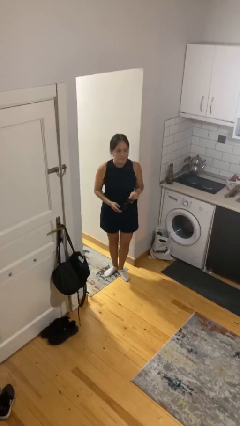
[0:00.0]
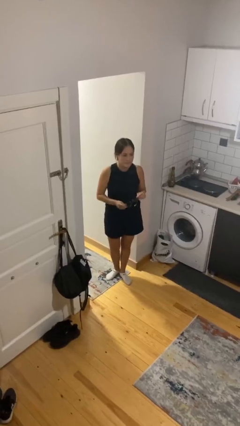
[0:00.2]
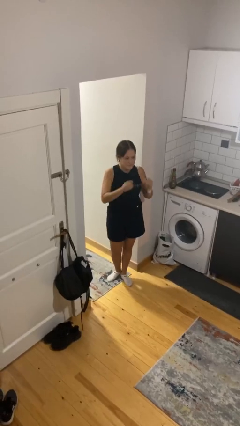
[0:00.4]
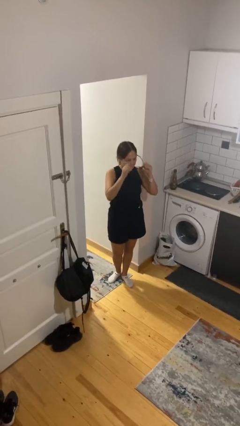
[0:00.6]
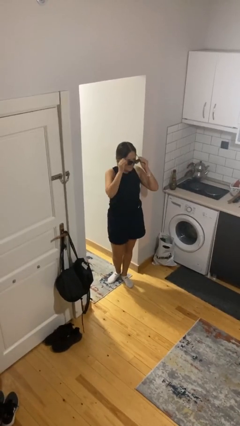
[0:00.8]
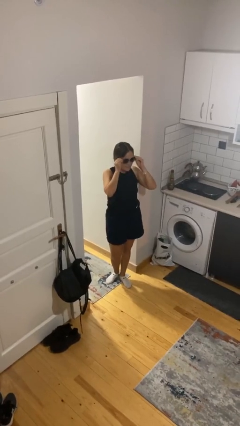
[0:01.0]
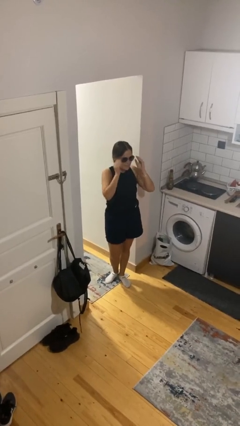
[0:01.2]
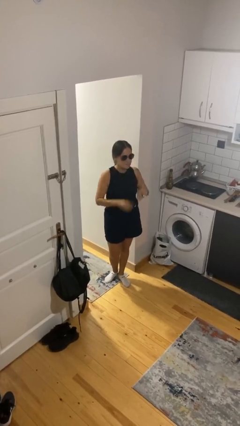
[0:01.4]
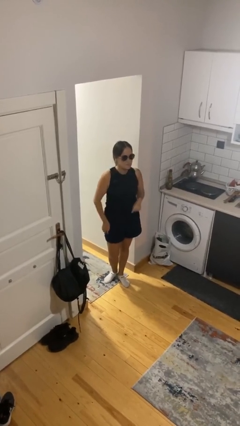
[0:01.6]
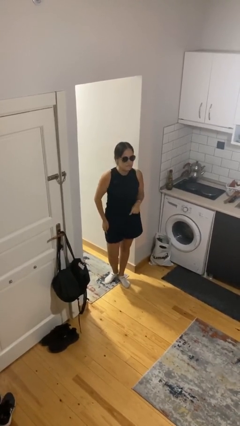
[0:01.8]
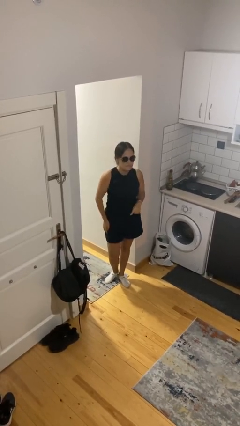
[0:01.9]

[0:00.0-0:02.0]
person puts on sunglasses

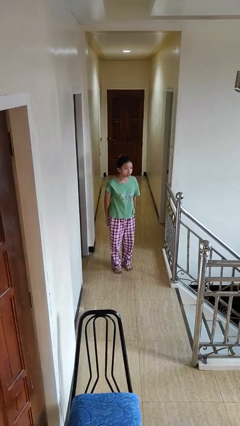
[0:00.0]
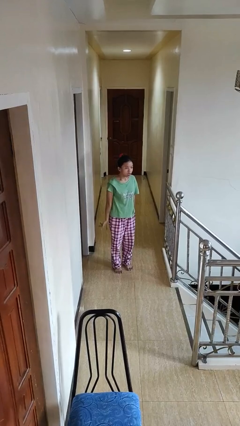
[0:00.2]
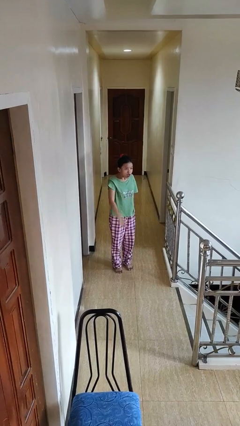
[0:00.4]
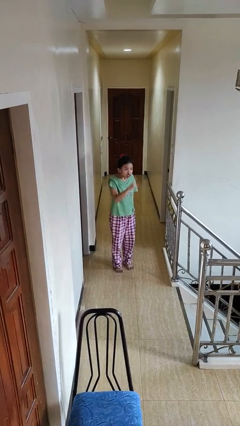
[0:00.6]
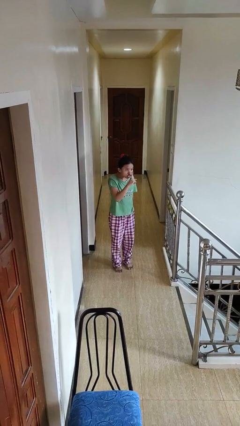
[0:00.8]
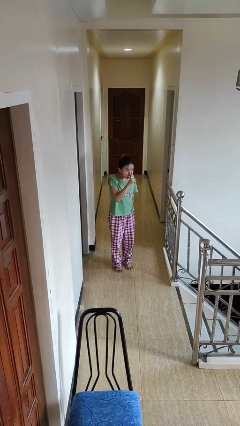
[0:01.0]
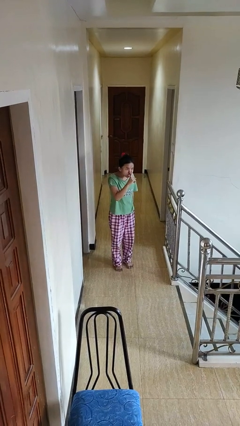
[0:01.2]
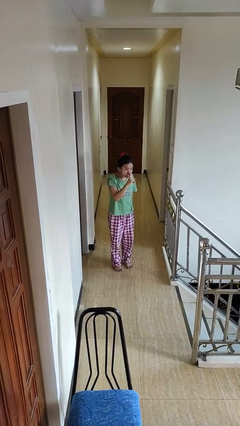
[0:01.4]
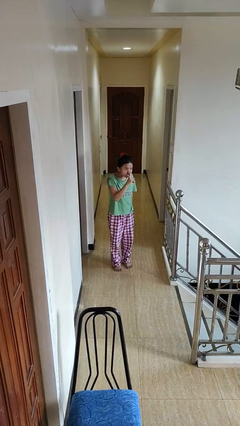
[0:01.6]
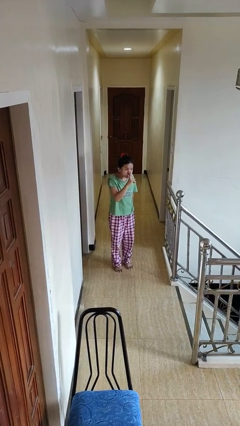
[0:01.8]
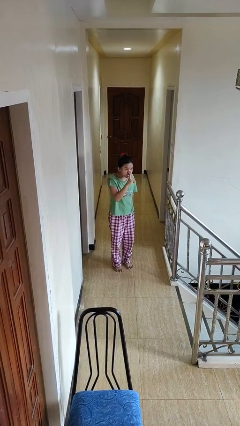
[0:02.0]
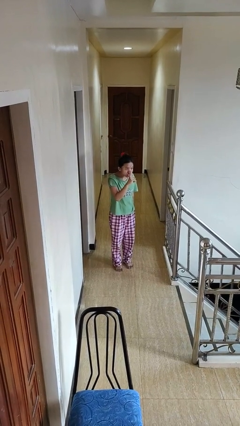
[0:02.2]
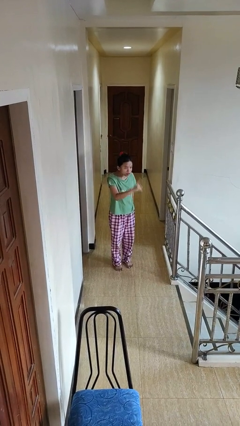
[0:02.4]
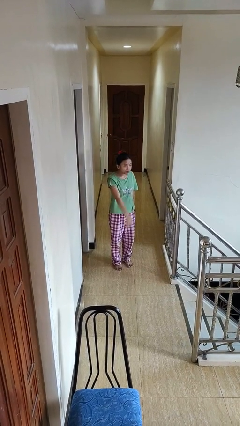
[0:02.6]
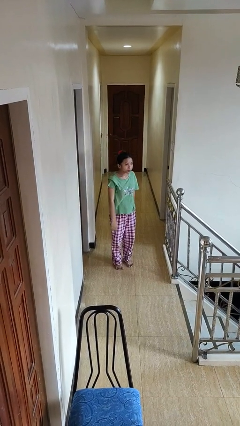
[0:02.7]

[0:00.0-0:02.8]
person gestures be quiet

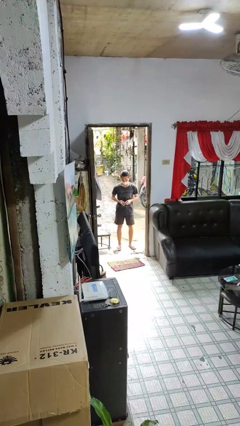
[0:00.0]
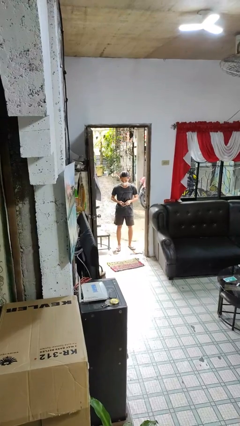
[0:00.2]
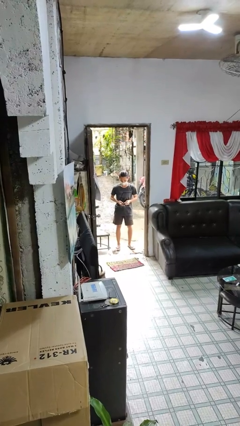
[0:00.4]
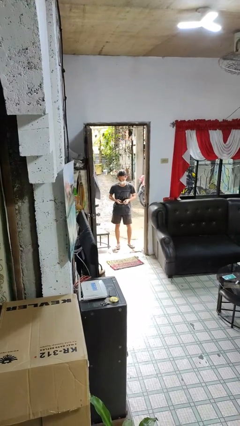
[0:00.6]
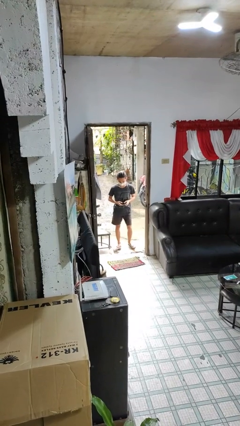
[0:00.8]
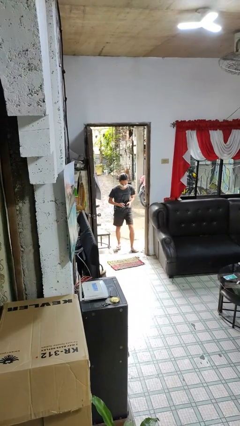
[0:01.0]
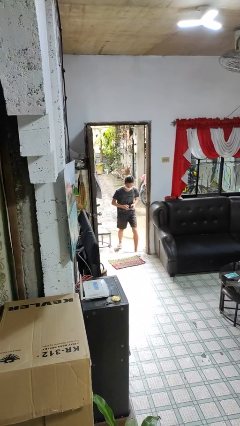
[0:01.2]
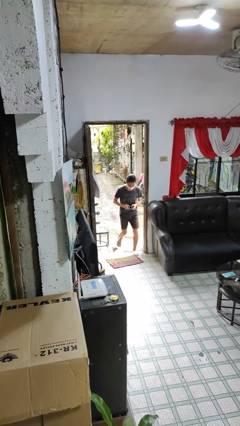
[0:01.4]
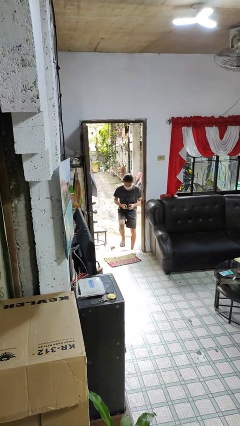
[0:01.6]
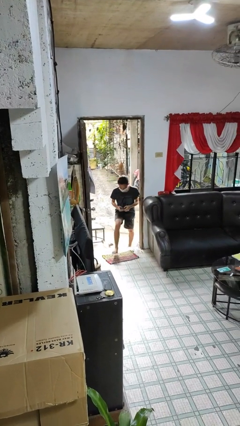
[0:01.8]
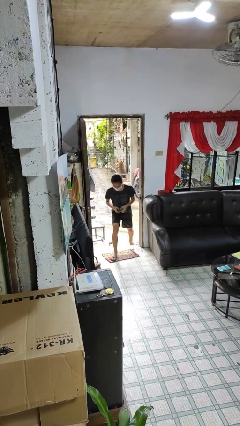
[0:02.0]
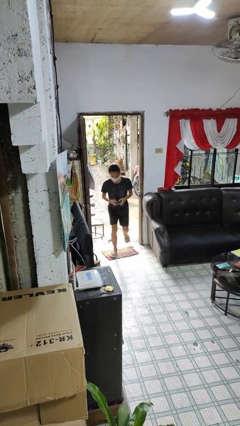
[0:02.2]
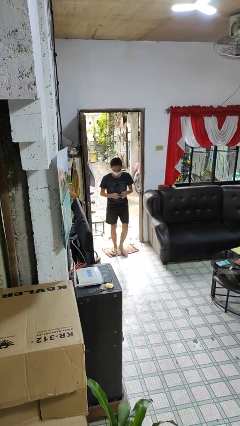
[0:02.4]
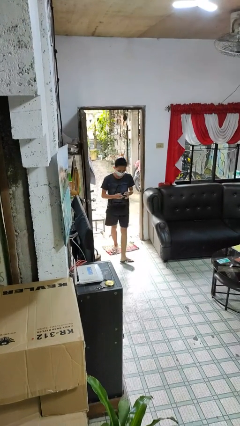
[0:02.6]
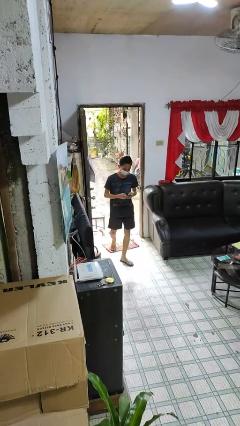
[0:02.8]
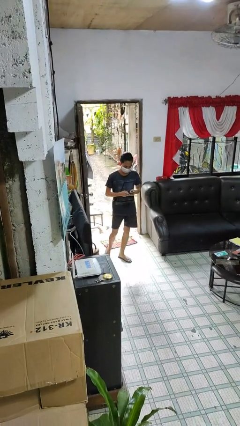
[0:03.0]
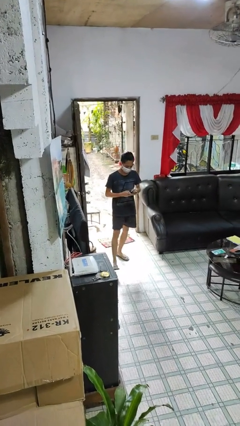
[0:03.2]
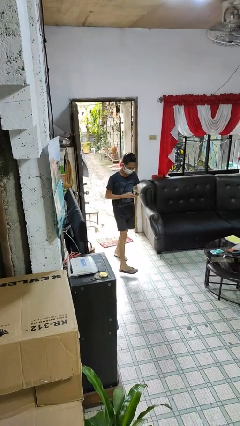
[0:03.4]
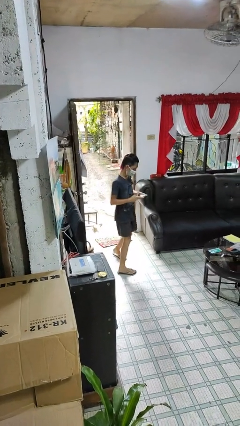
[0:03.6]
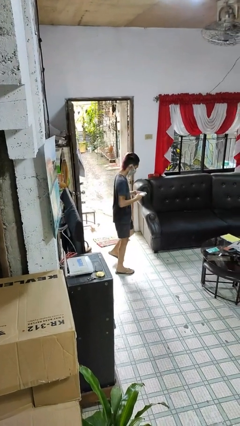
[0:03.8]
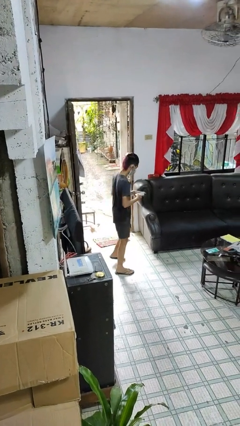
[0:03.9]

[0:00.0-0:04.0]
person enters scene through structure

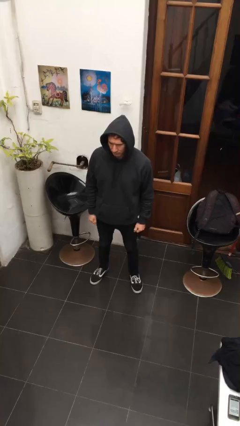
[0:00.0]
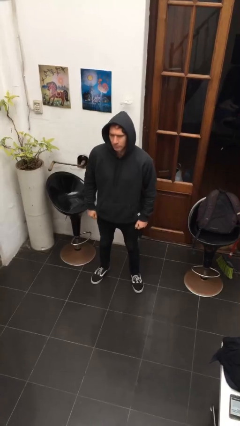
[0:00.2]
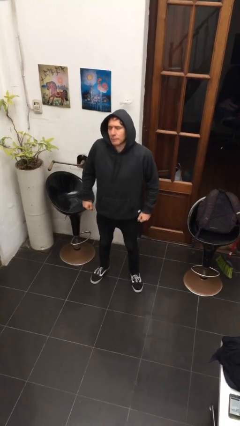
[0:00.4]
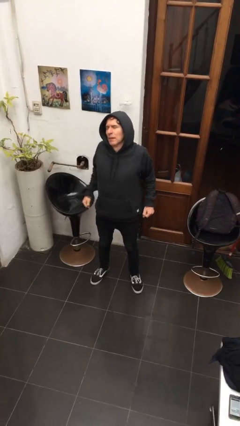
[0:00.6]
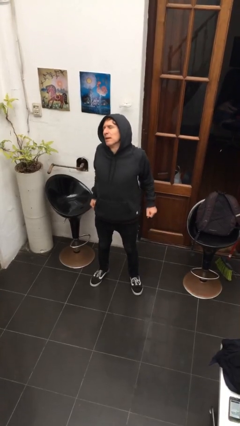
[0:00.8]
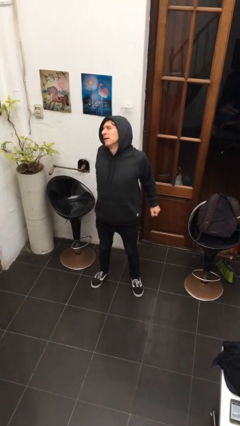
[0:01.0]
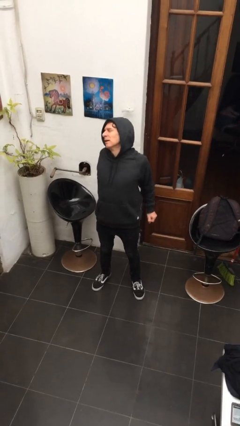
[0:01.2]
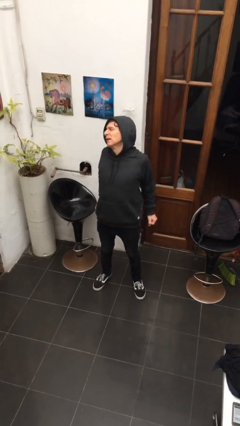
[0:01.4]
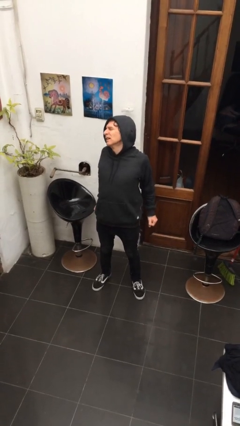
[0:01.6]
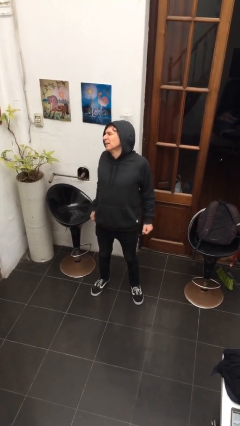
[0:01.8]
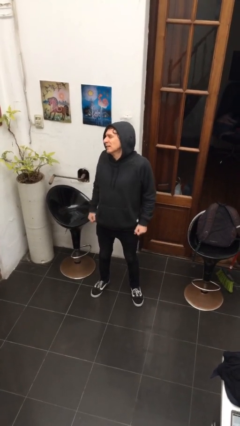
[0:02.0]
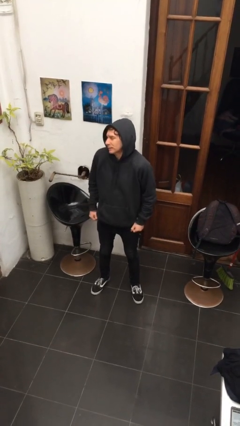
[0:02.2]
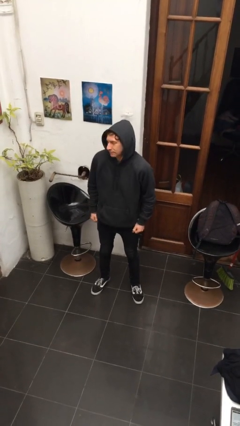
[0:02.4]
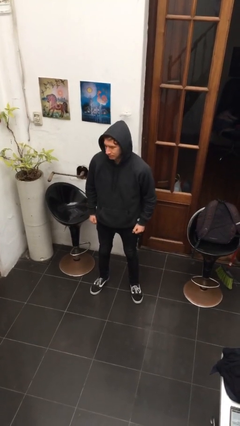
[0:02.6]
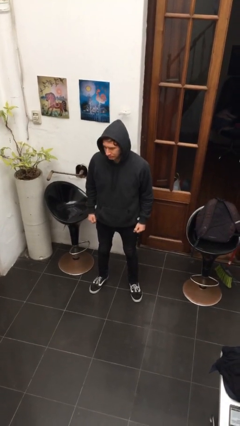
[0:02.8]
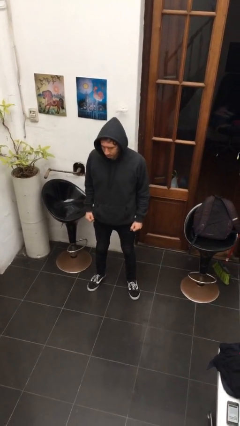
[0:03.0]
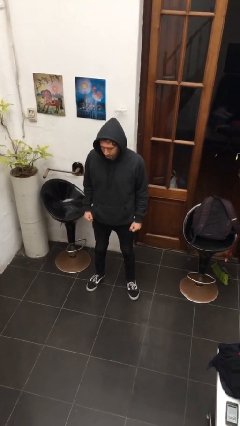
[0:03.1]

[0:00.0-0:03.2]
person stretches back

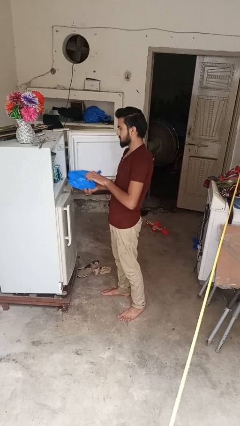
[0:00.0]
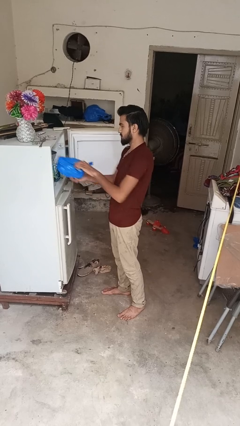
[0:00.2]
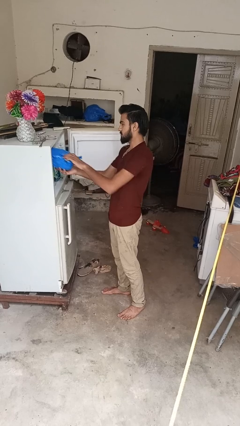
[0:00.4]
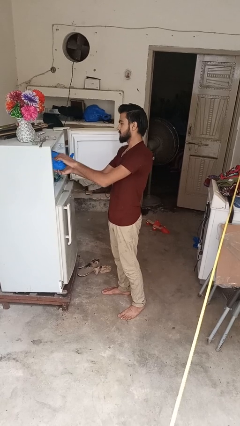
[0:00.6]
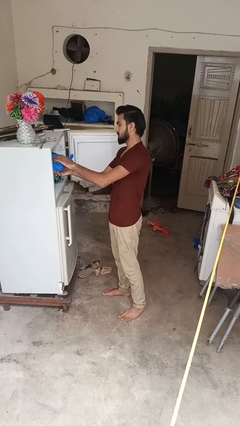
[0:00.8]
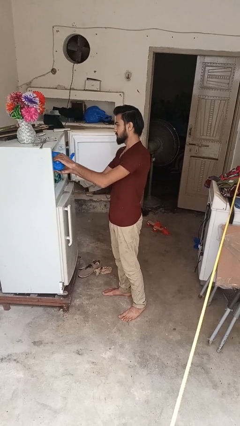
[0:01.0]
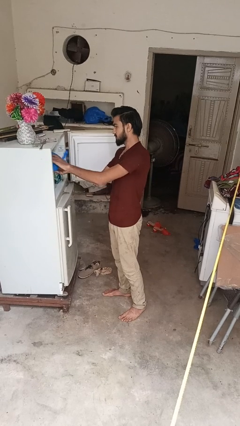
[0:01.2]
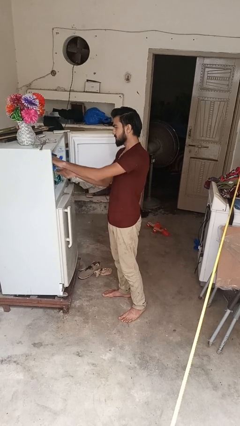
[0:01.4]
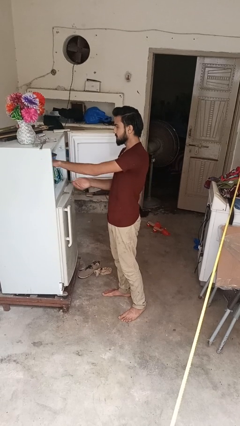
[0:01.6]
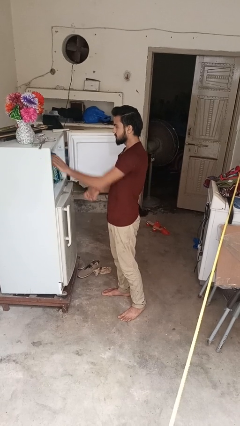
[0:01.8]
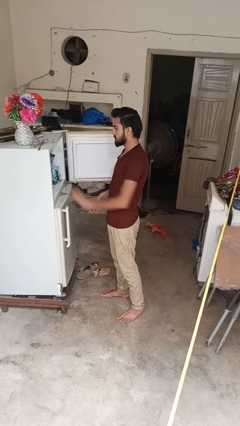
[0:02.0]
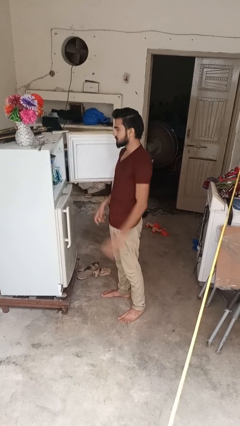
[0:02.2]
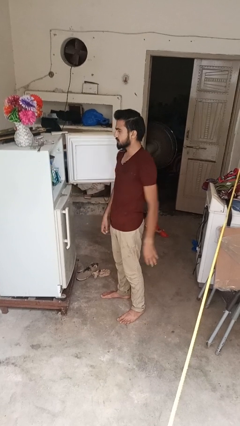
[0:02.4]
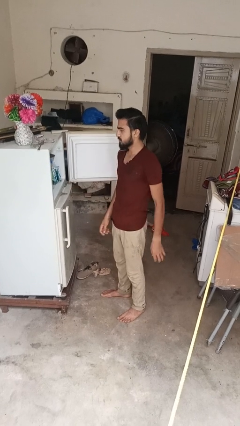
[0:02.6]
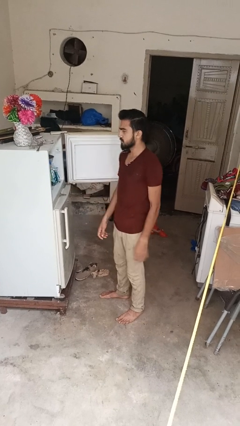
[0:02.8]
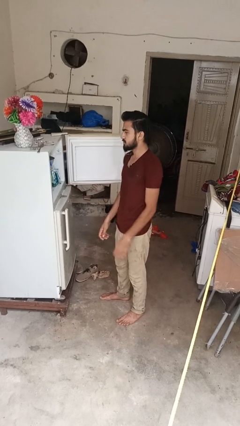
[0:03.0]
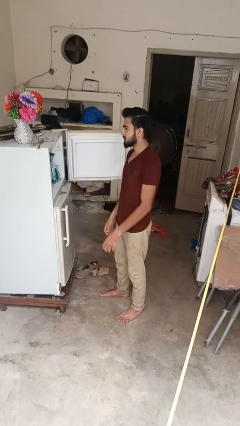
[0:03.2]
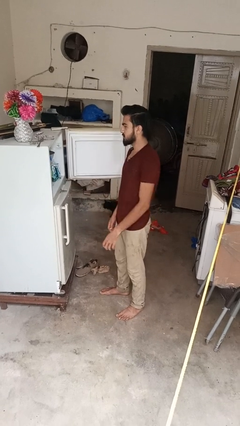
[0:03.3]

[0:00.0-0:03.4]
person loads groceries into refrigerator

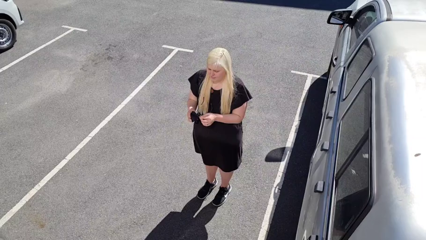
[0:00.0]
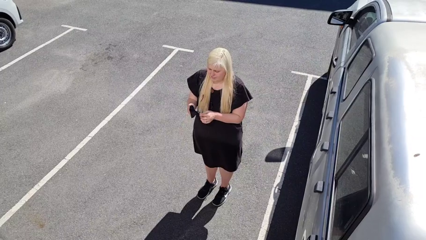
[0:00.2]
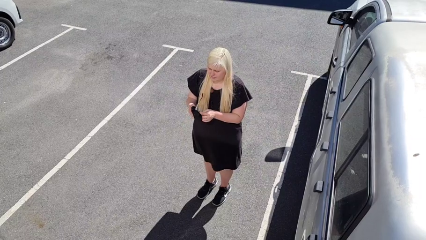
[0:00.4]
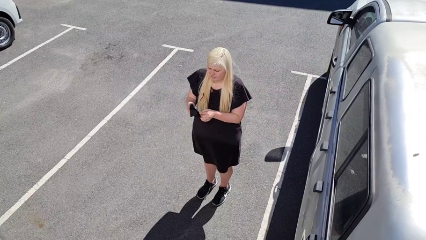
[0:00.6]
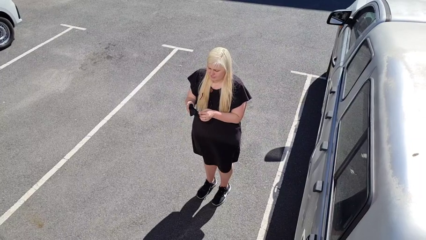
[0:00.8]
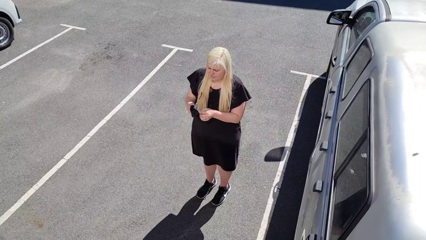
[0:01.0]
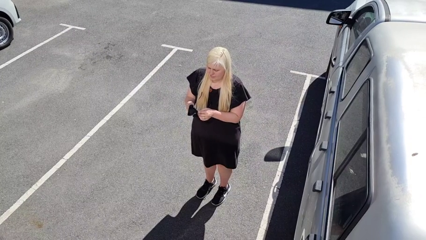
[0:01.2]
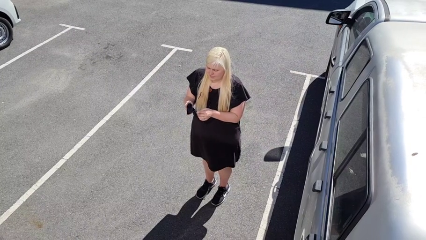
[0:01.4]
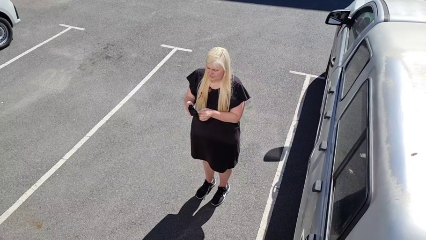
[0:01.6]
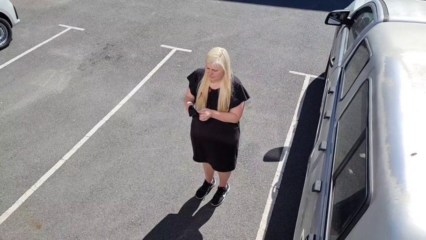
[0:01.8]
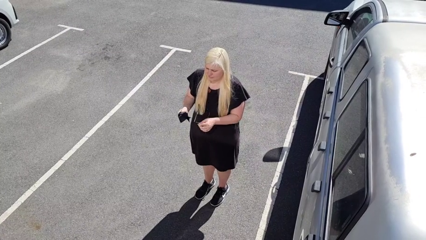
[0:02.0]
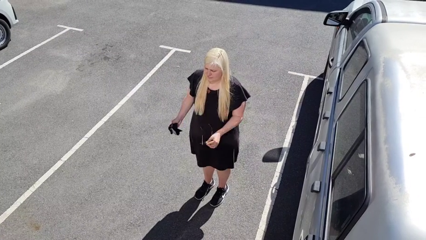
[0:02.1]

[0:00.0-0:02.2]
person cleans eyeglasses
